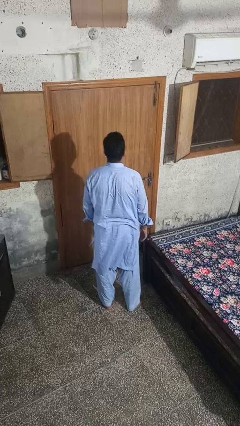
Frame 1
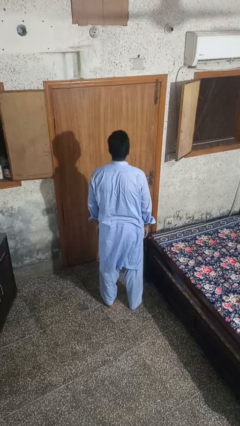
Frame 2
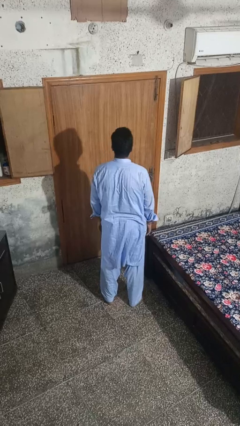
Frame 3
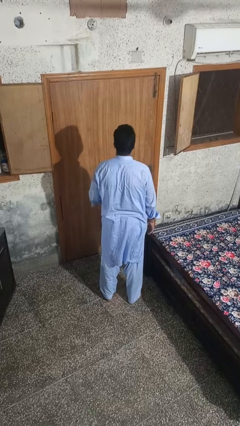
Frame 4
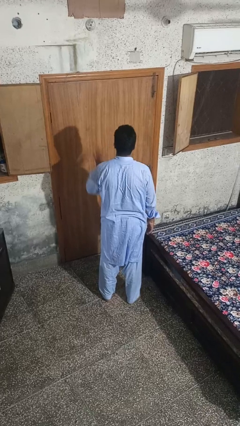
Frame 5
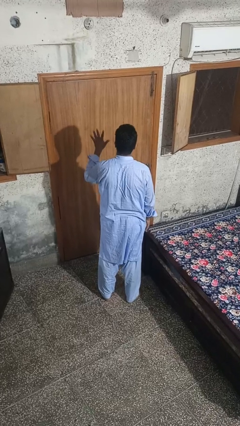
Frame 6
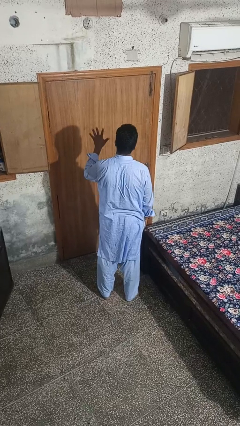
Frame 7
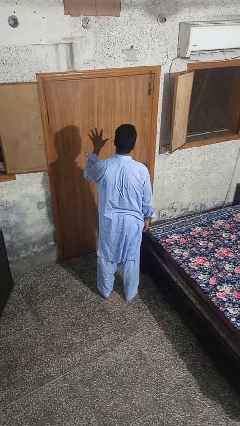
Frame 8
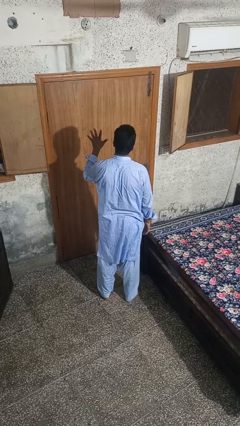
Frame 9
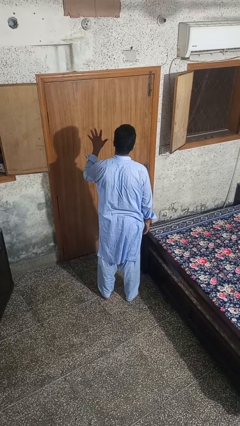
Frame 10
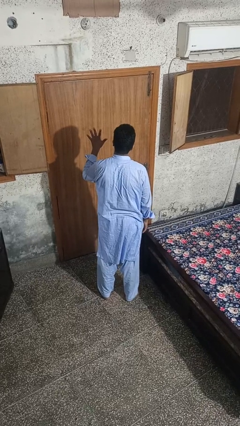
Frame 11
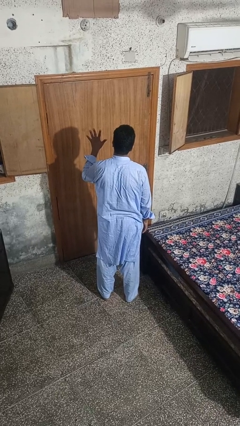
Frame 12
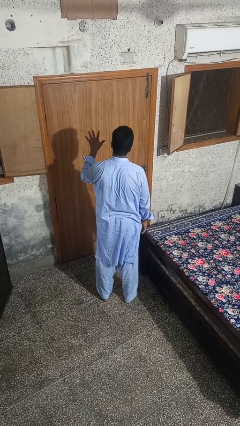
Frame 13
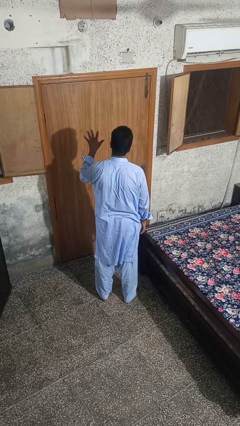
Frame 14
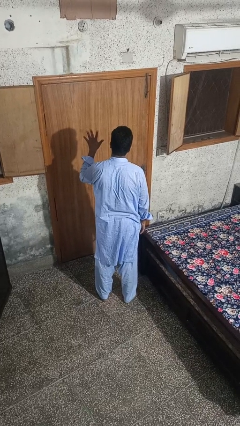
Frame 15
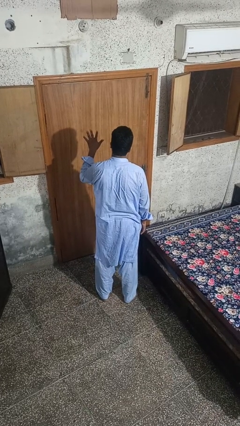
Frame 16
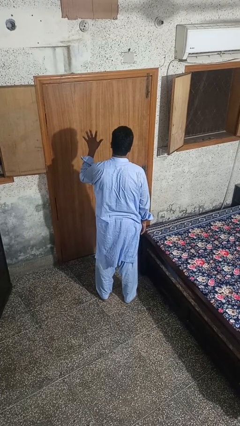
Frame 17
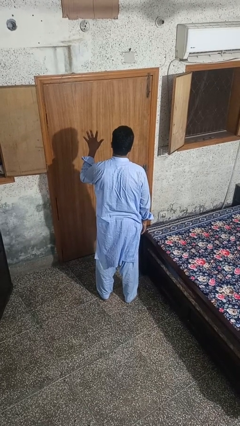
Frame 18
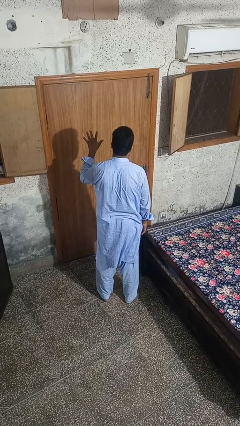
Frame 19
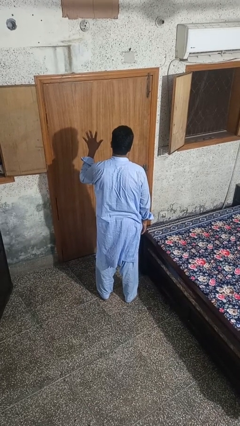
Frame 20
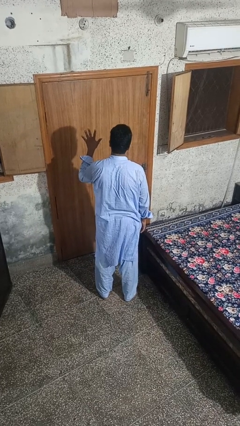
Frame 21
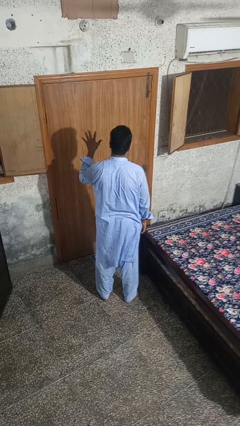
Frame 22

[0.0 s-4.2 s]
person gestures number five

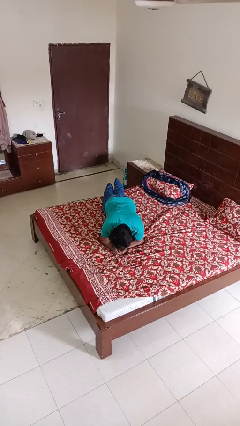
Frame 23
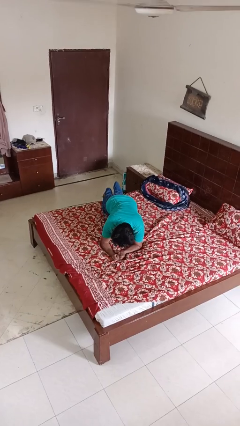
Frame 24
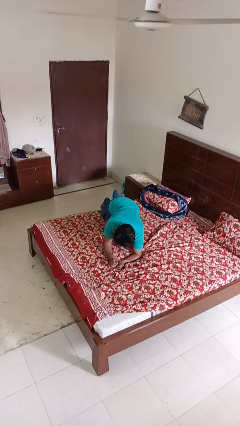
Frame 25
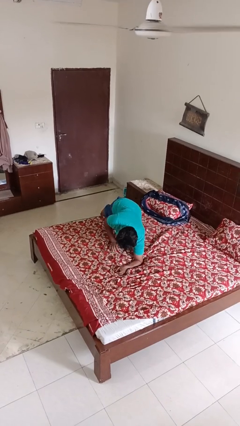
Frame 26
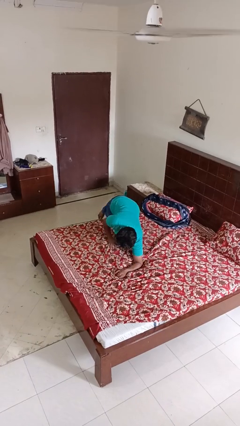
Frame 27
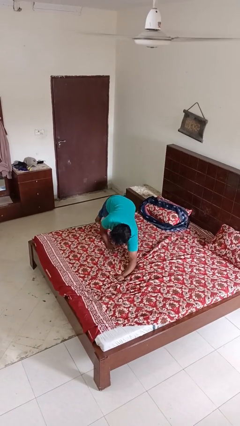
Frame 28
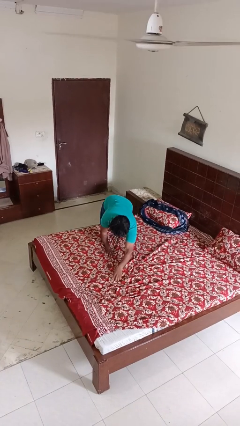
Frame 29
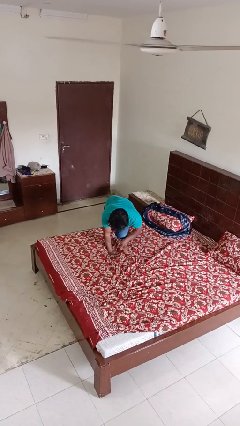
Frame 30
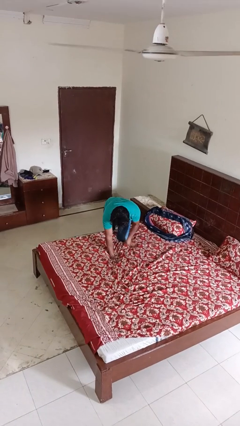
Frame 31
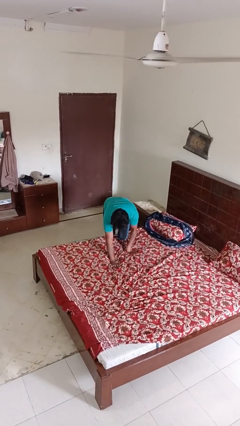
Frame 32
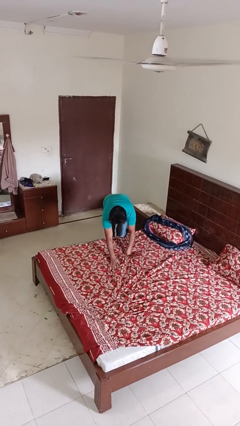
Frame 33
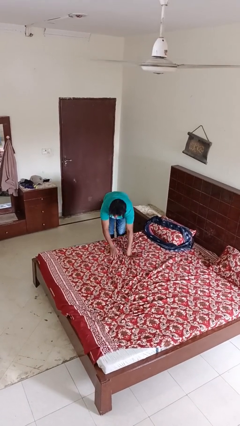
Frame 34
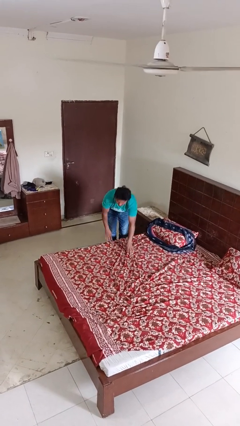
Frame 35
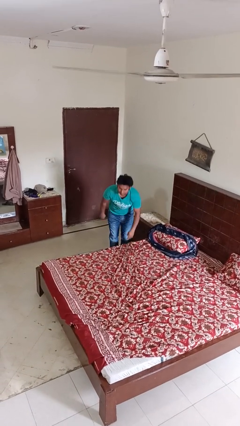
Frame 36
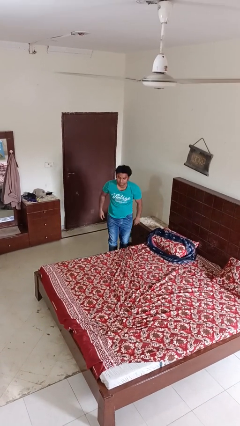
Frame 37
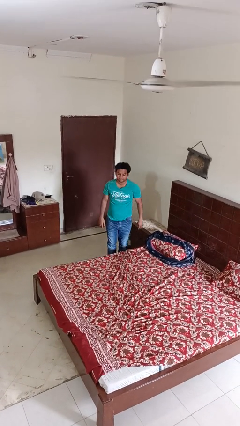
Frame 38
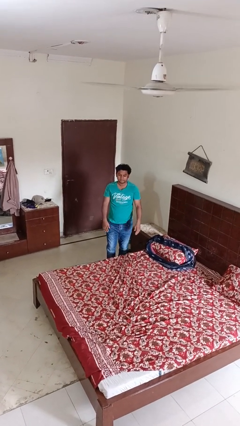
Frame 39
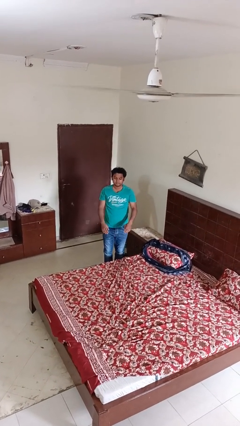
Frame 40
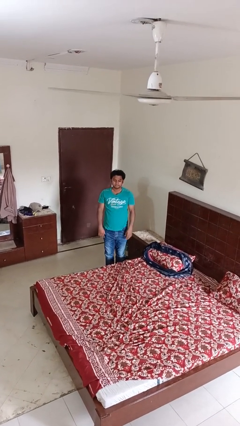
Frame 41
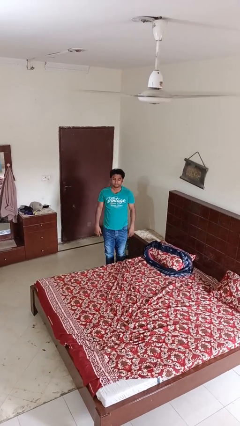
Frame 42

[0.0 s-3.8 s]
person stands up

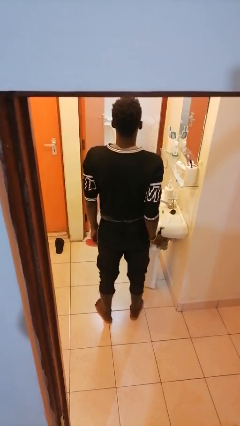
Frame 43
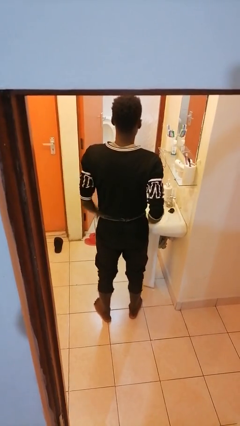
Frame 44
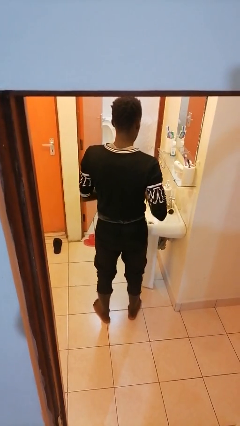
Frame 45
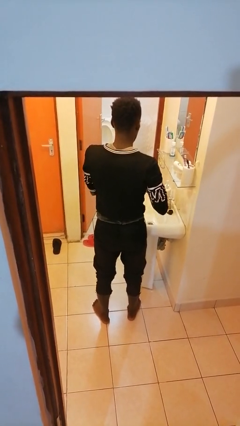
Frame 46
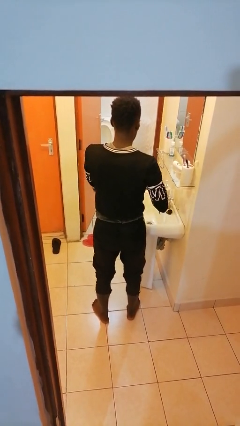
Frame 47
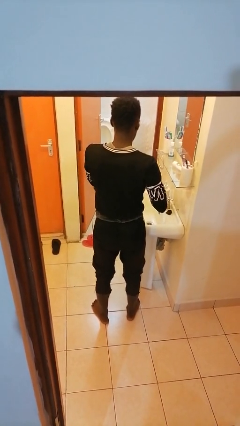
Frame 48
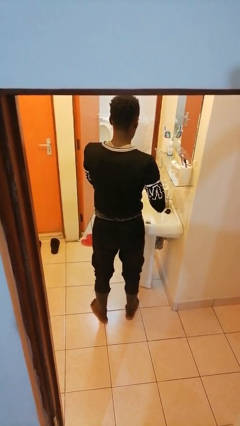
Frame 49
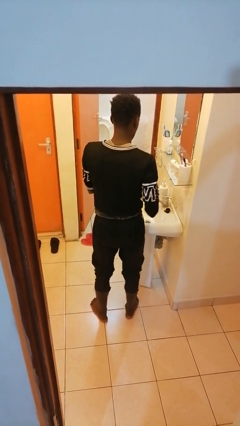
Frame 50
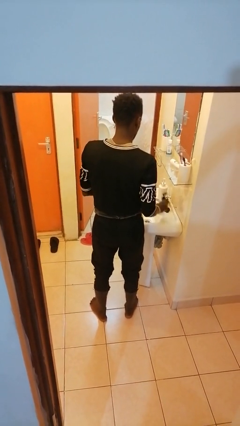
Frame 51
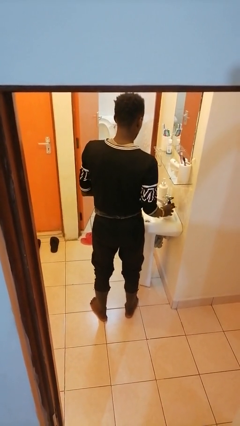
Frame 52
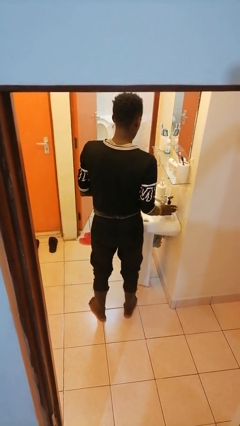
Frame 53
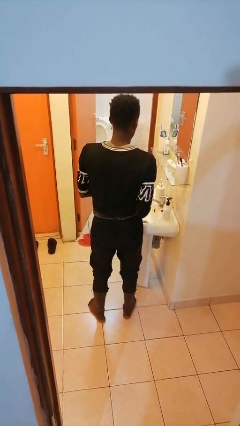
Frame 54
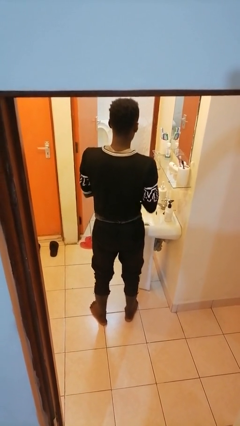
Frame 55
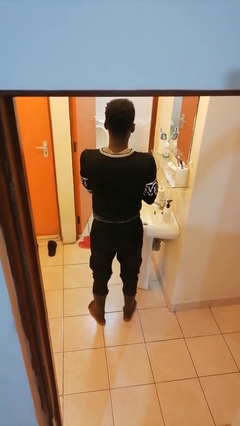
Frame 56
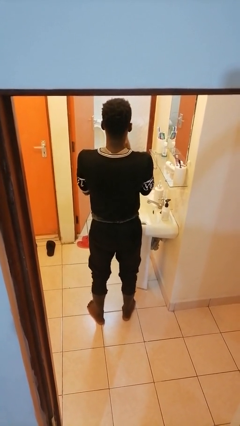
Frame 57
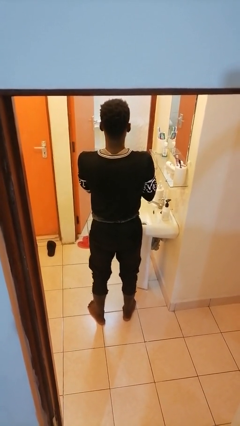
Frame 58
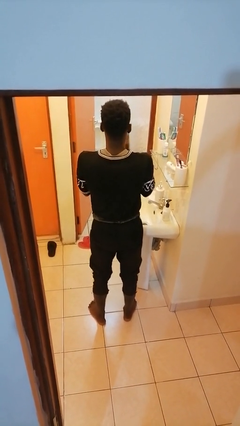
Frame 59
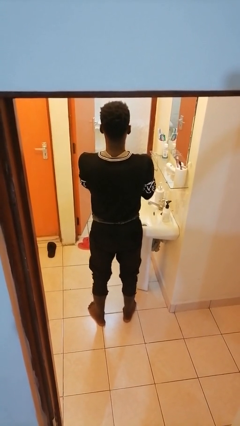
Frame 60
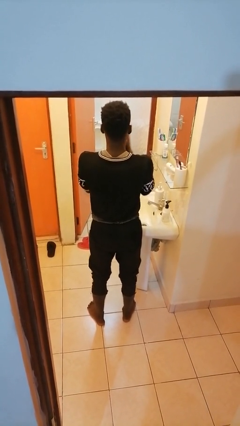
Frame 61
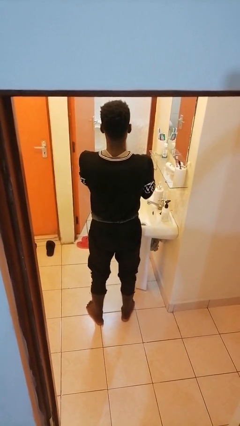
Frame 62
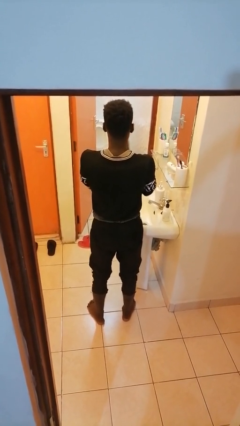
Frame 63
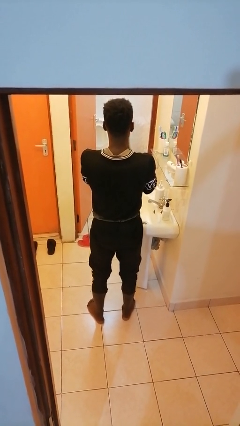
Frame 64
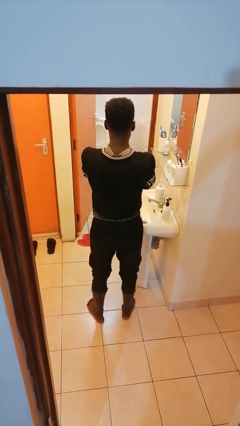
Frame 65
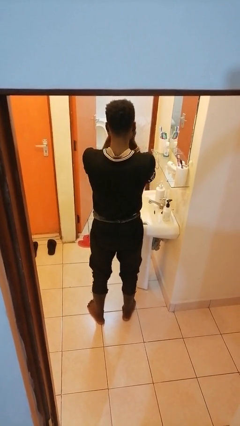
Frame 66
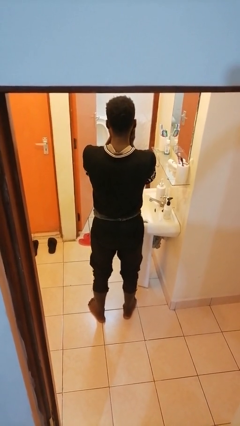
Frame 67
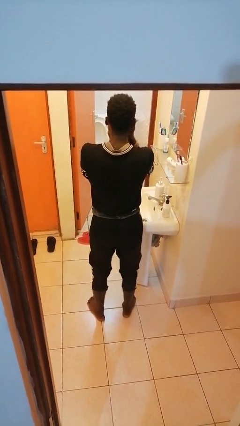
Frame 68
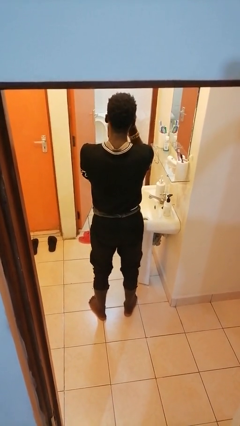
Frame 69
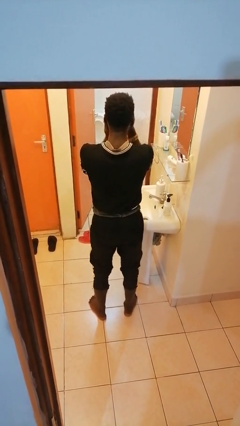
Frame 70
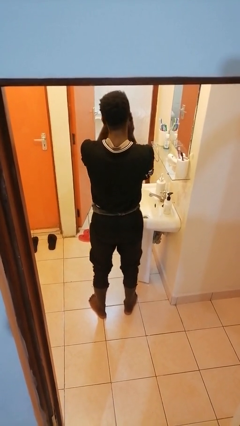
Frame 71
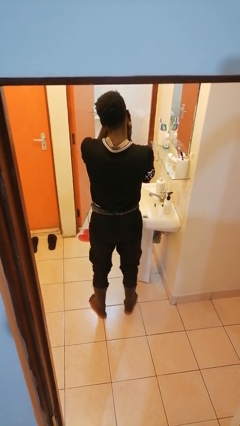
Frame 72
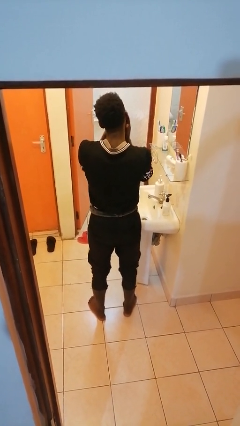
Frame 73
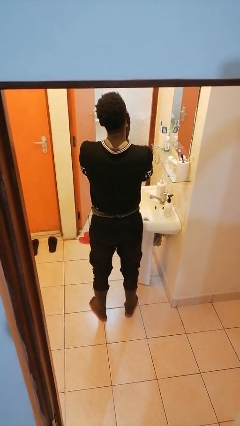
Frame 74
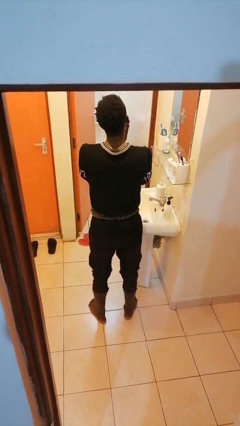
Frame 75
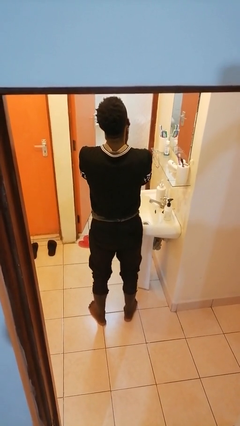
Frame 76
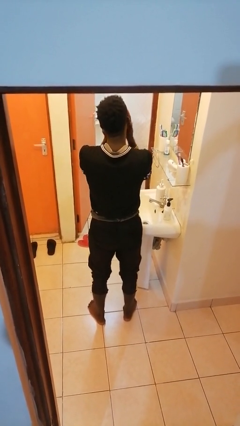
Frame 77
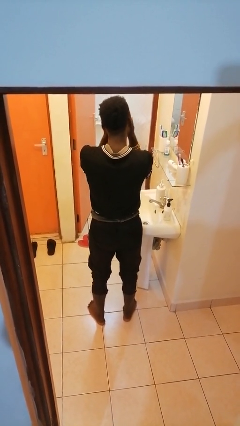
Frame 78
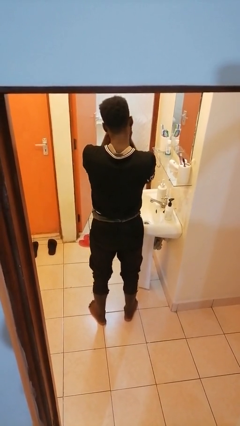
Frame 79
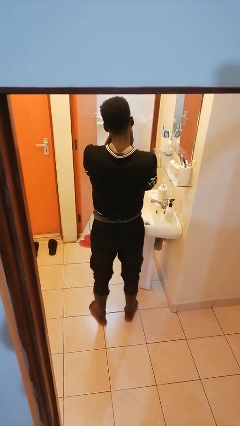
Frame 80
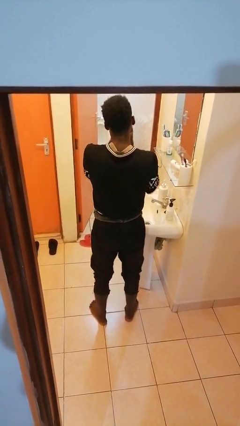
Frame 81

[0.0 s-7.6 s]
person applies facial moisturizer

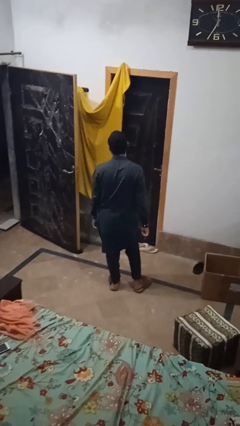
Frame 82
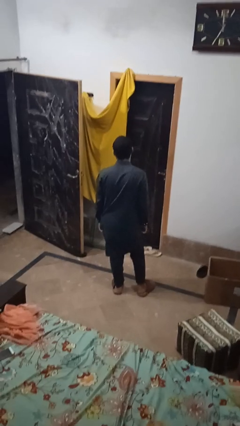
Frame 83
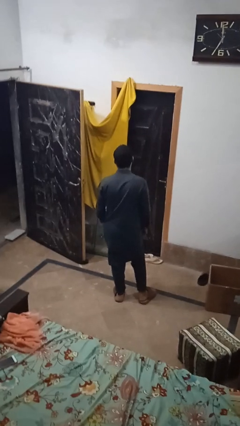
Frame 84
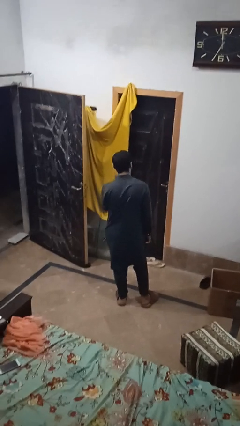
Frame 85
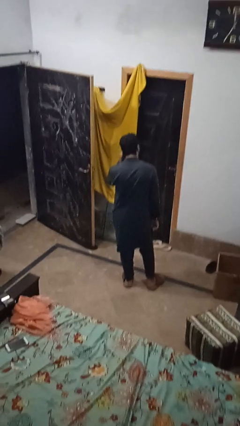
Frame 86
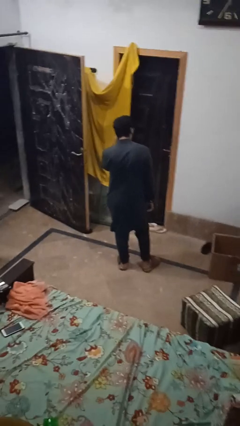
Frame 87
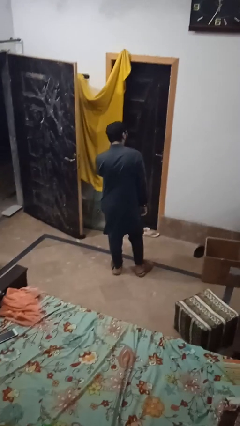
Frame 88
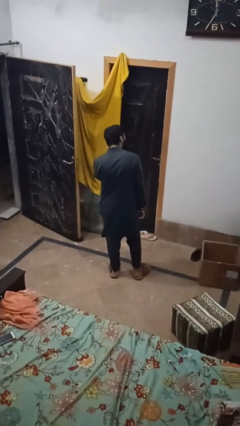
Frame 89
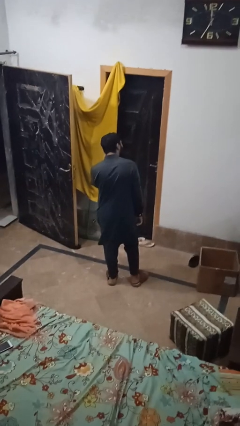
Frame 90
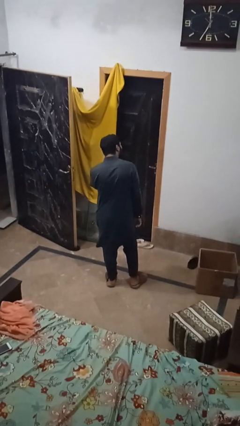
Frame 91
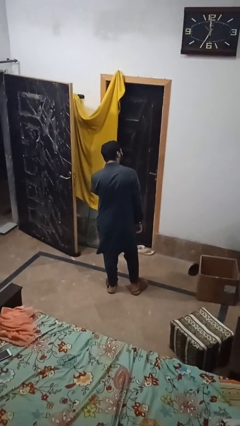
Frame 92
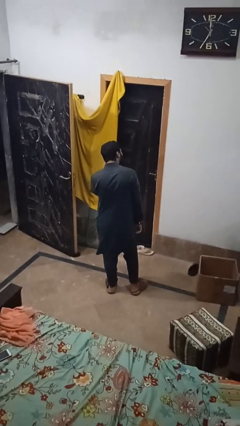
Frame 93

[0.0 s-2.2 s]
person gestures listen closely
